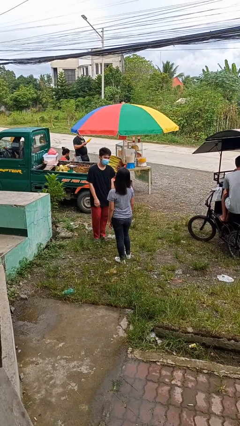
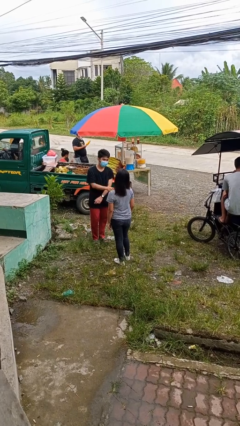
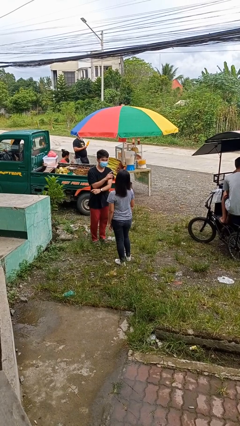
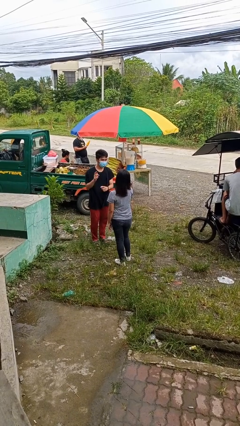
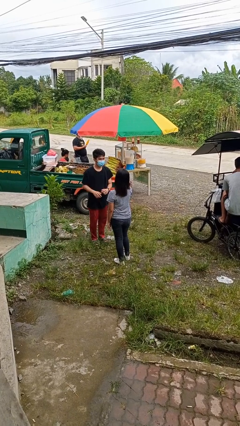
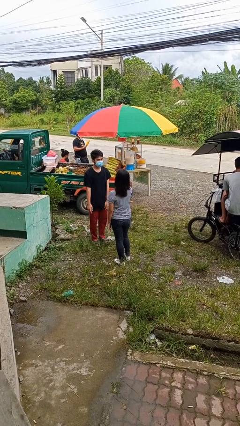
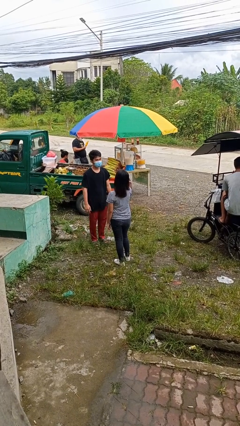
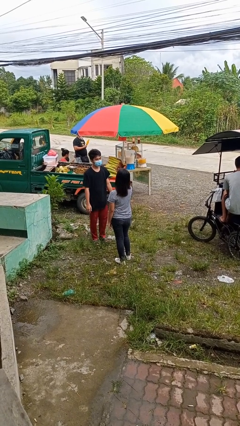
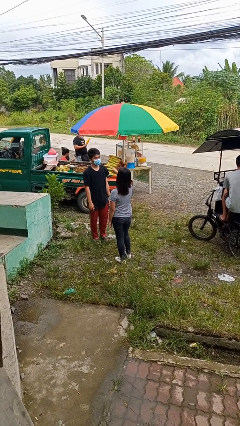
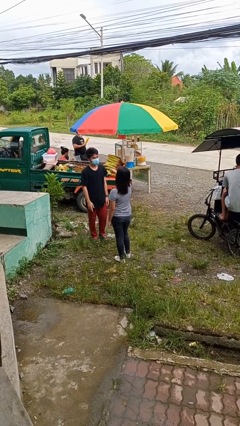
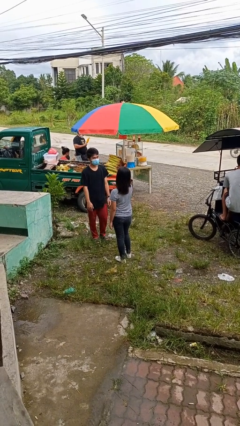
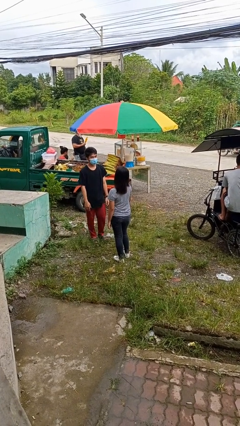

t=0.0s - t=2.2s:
person talks to person

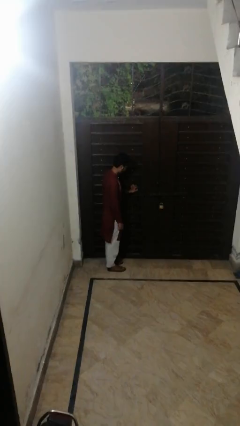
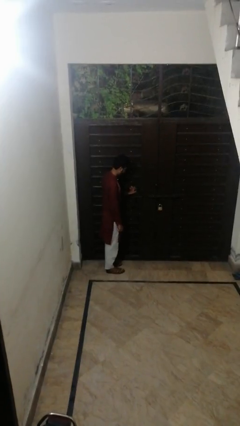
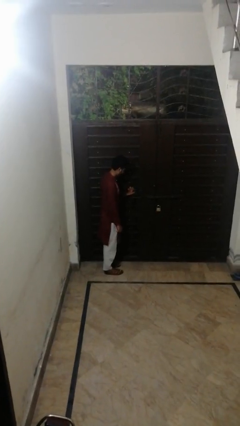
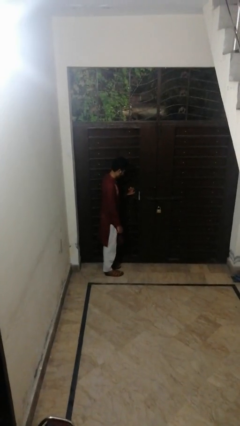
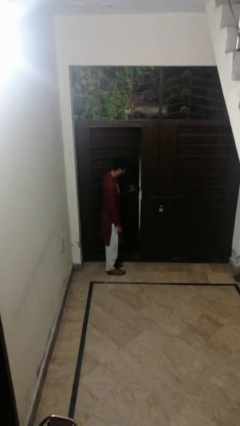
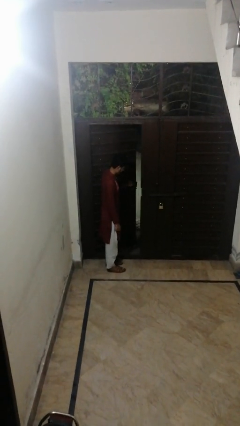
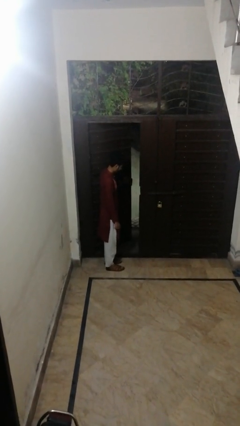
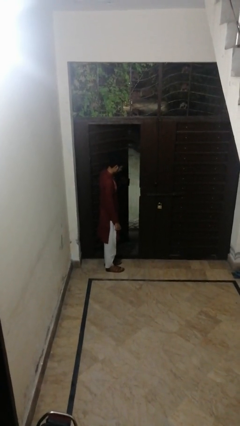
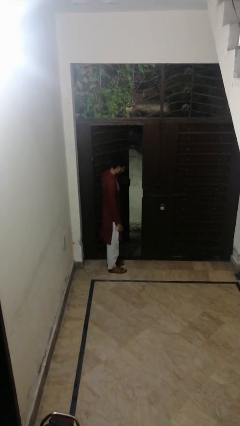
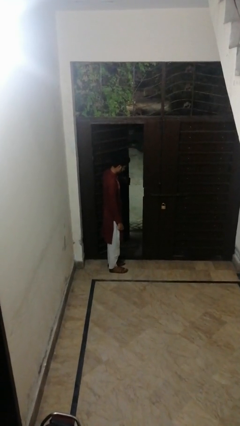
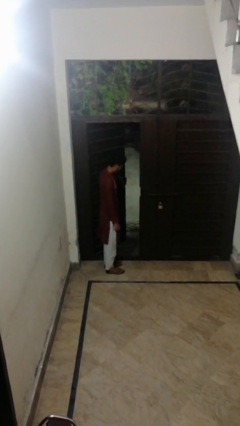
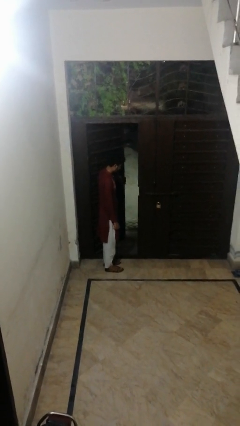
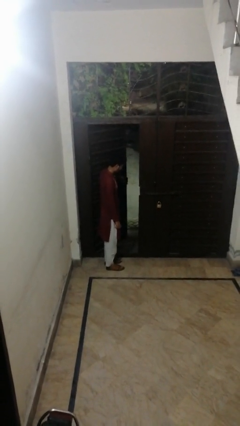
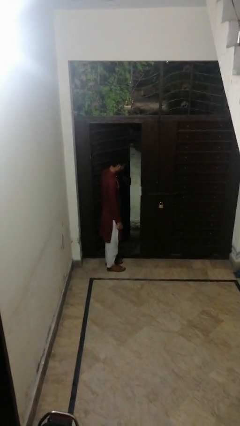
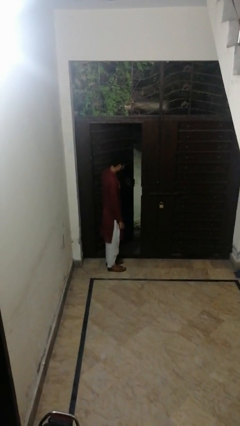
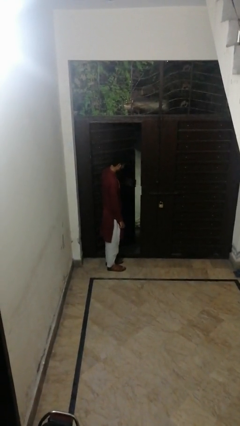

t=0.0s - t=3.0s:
person opens facility door

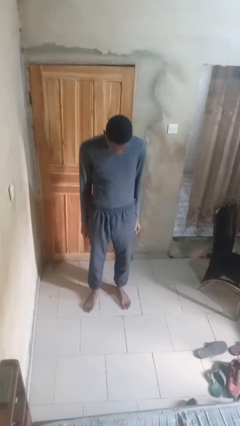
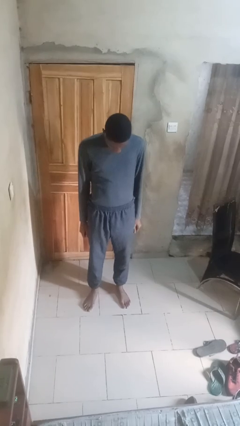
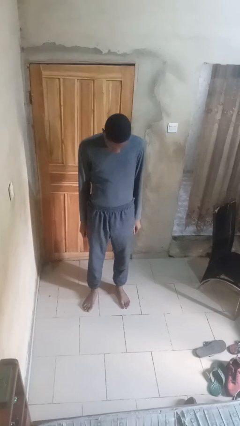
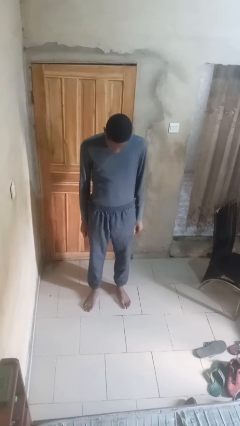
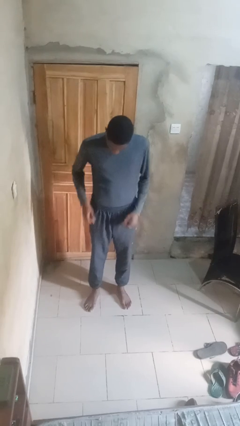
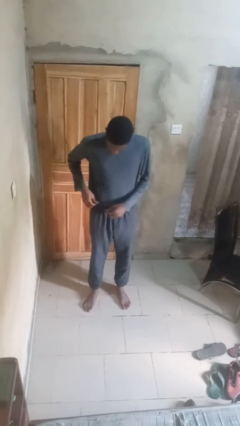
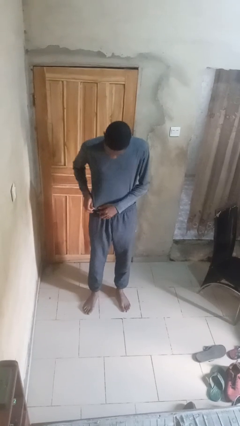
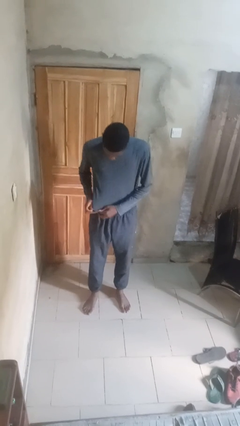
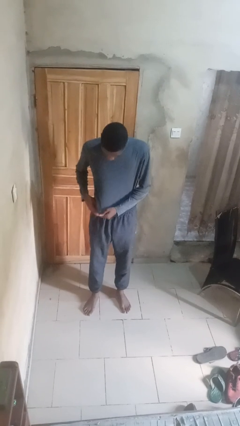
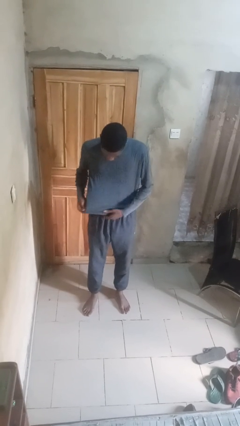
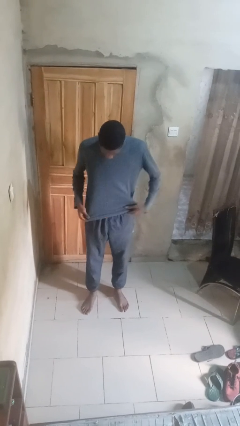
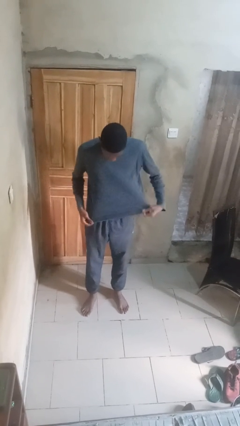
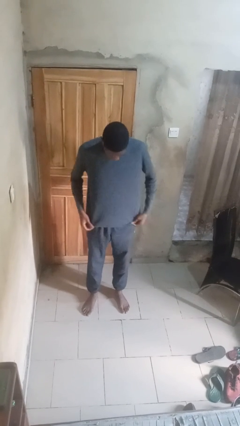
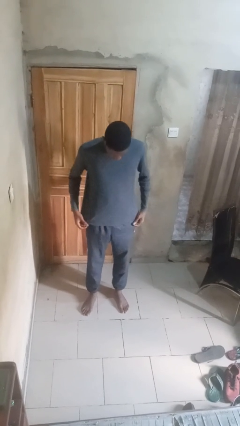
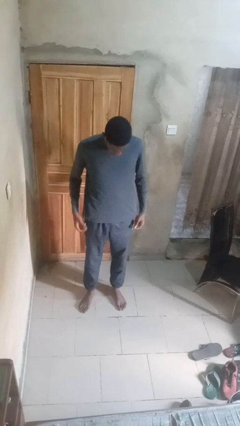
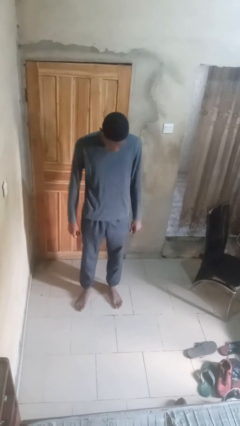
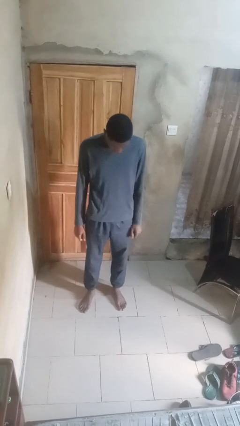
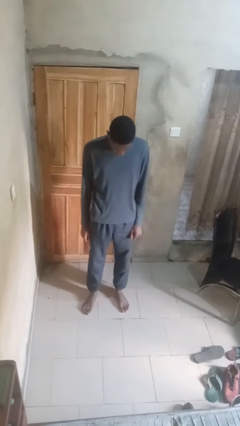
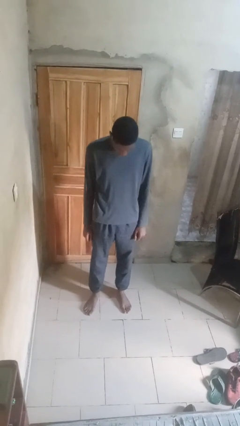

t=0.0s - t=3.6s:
person untucks shirt

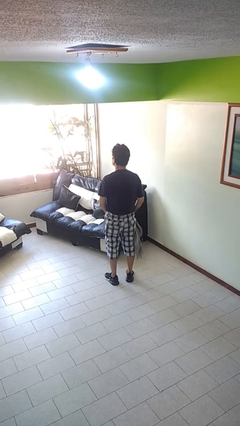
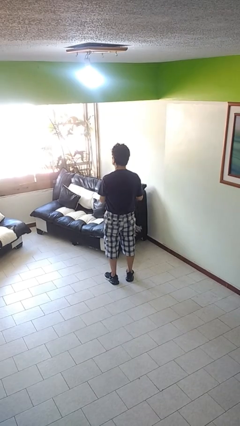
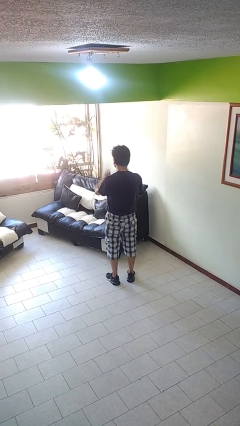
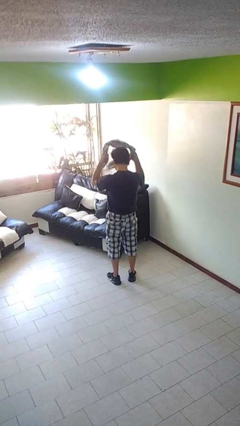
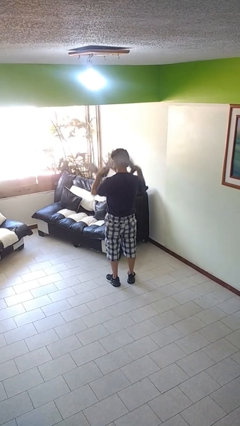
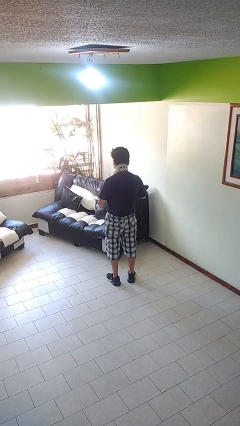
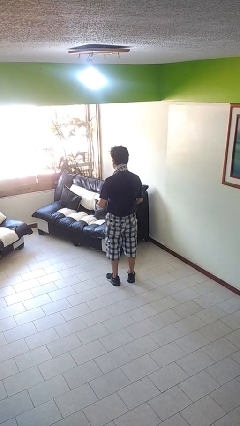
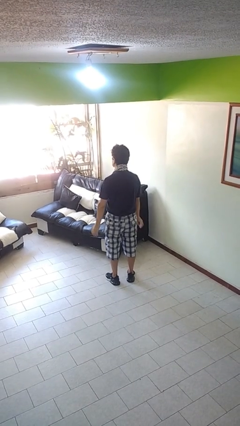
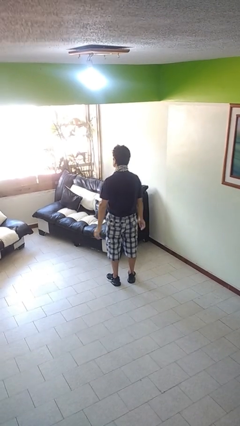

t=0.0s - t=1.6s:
person puts on scarf

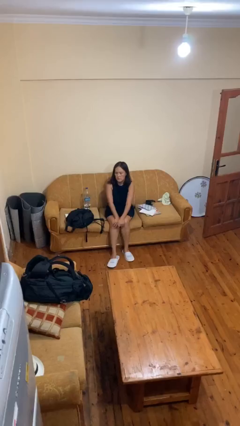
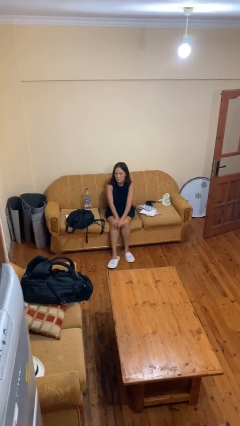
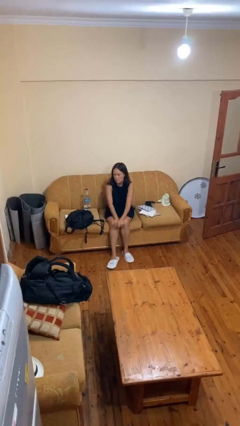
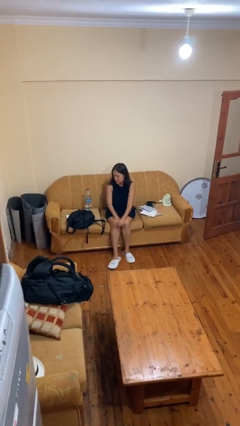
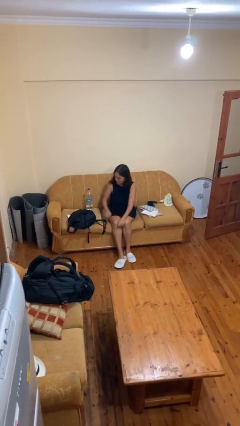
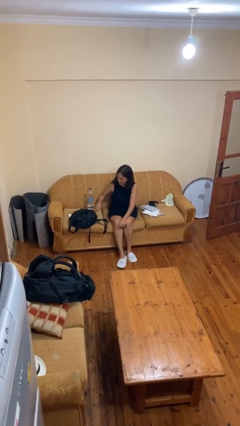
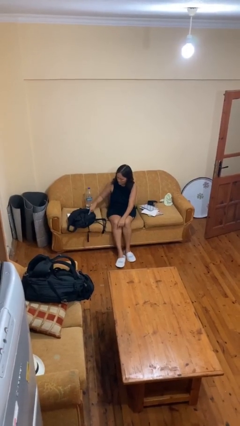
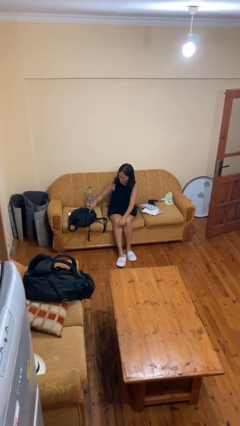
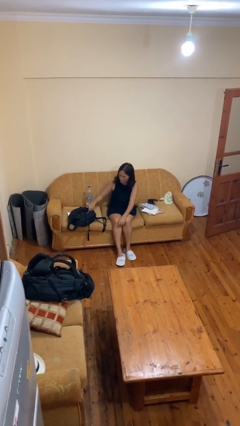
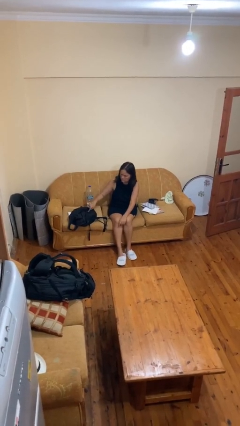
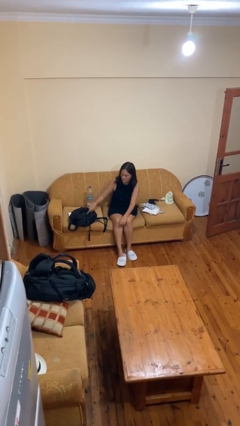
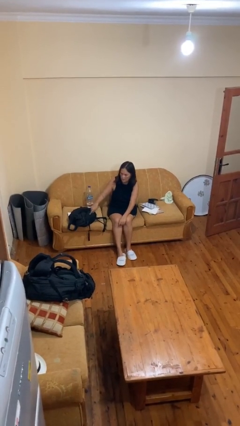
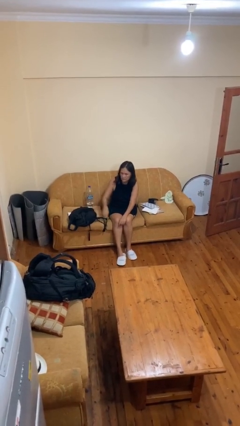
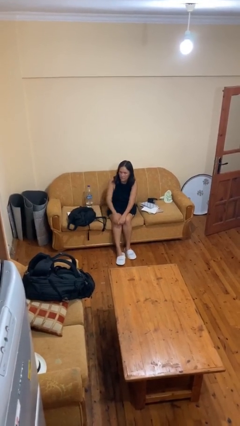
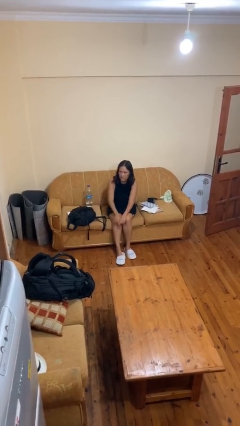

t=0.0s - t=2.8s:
person taps object with finger

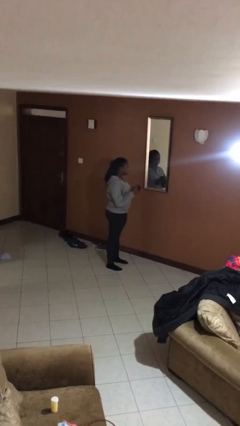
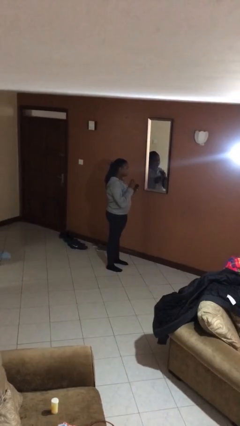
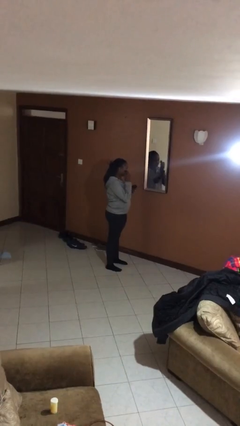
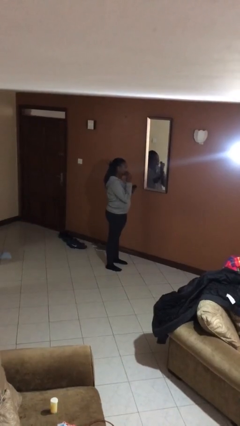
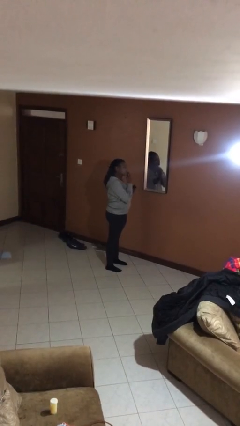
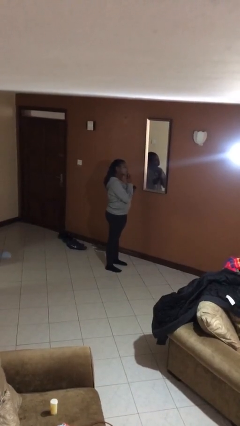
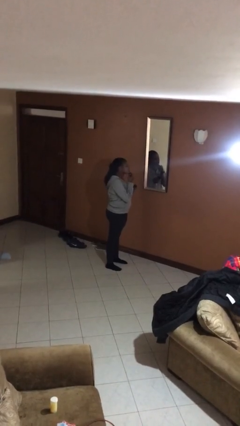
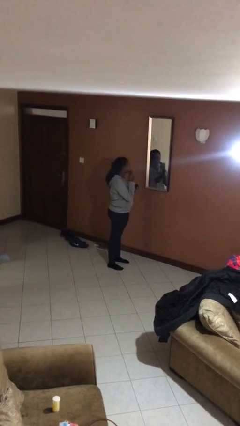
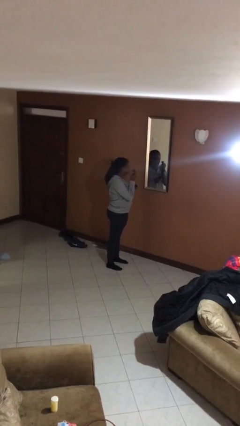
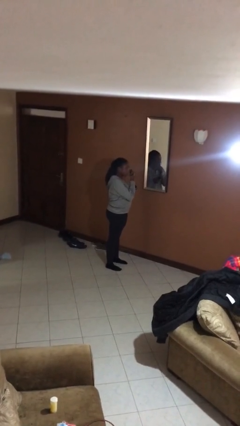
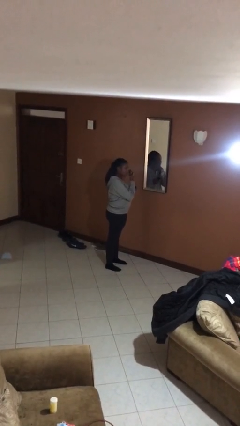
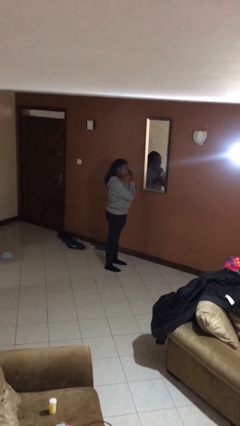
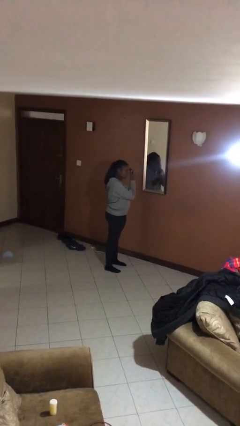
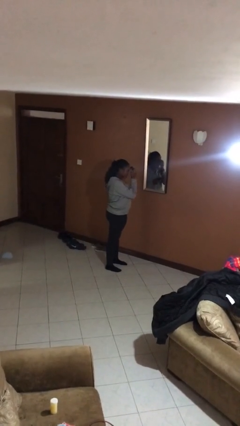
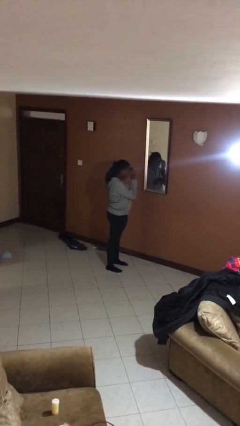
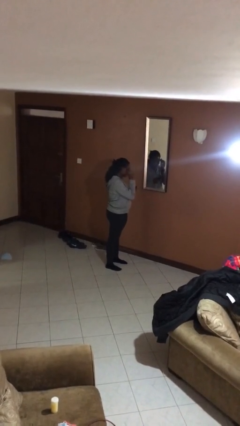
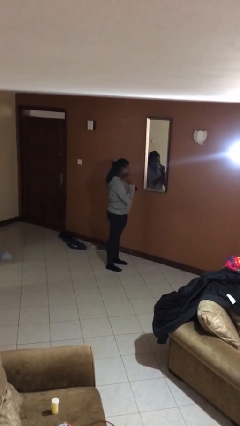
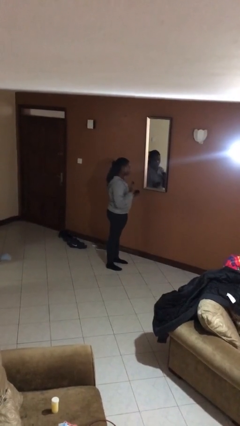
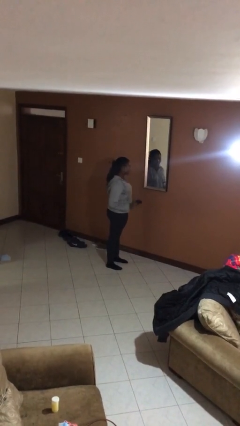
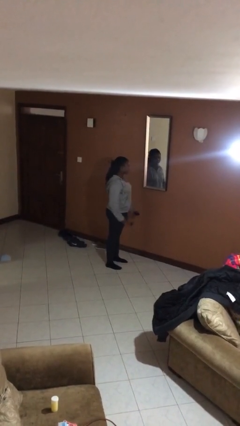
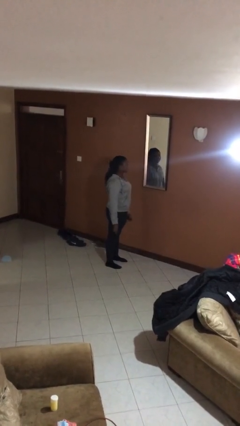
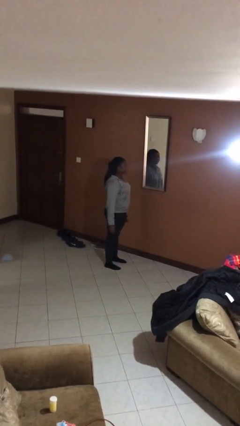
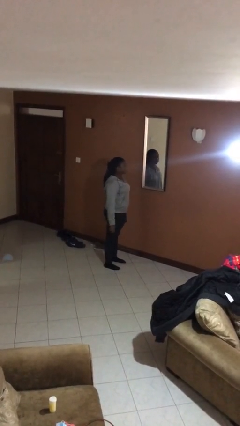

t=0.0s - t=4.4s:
person applies foundation makeup
